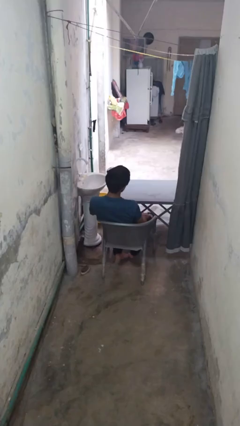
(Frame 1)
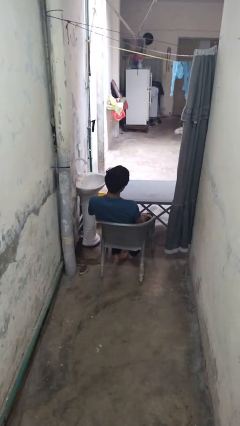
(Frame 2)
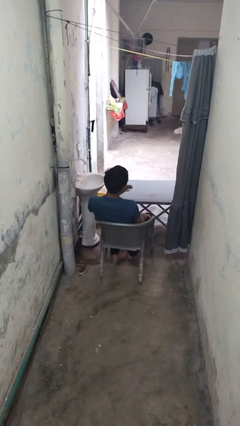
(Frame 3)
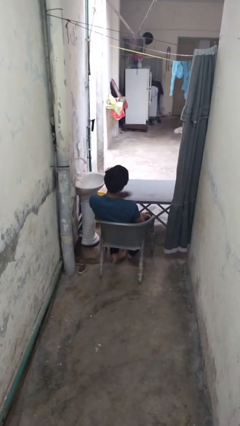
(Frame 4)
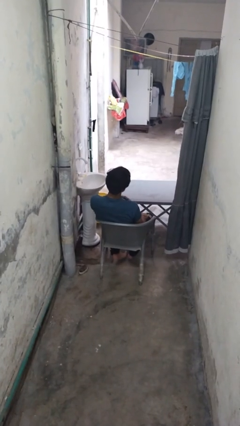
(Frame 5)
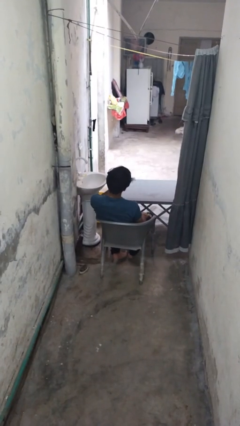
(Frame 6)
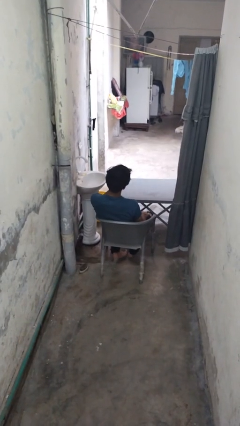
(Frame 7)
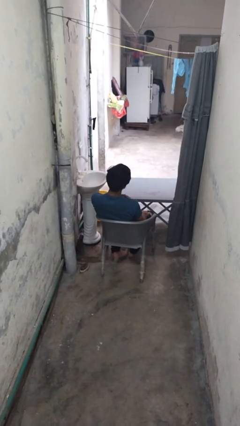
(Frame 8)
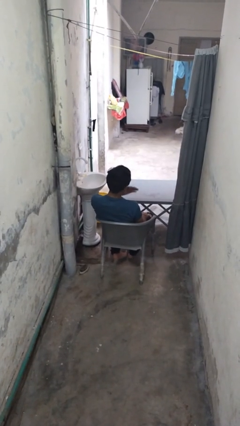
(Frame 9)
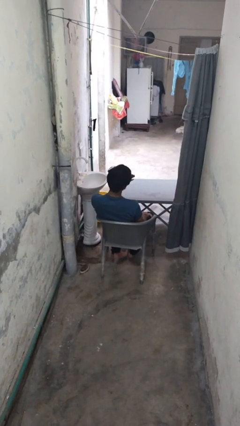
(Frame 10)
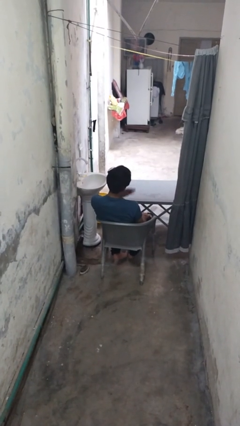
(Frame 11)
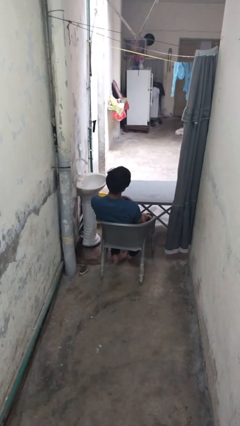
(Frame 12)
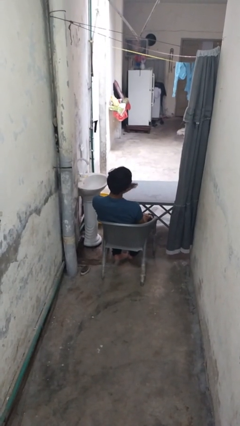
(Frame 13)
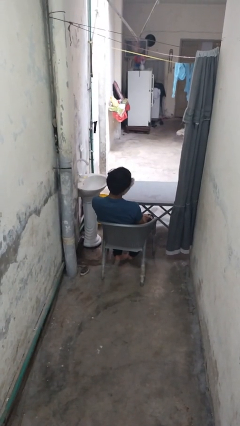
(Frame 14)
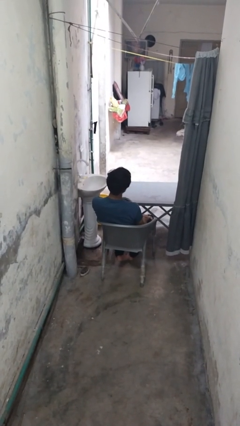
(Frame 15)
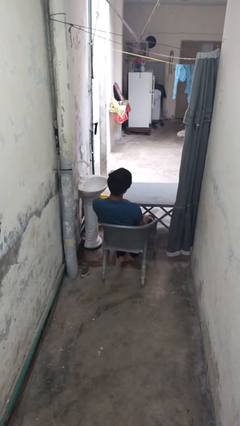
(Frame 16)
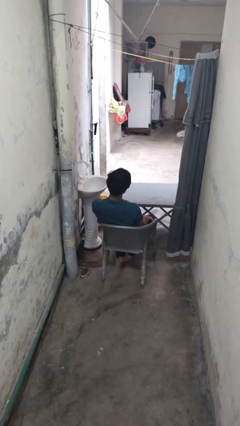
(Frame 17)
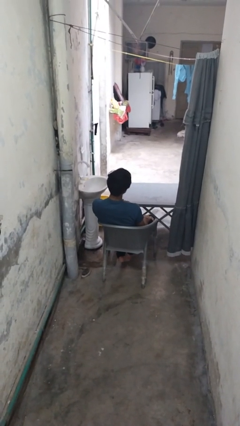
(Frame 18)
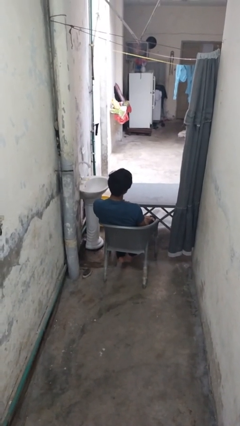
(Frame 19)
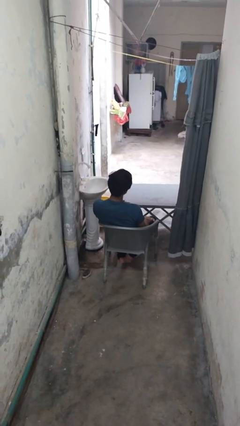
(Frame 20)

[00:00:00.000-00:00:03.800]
person drums on chest

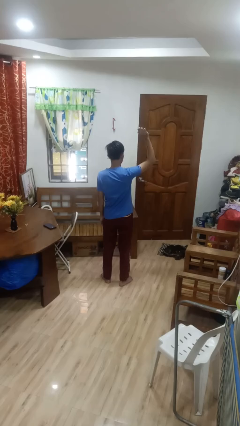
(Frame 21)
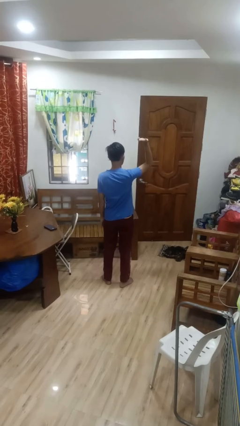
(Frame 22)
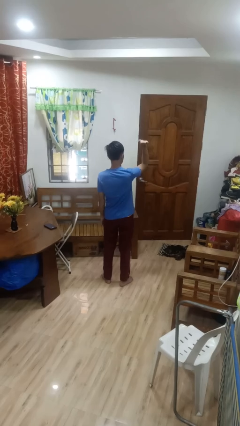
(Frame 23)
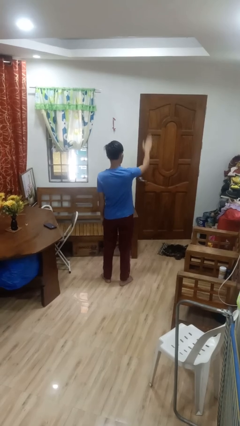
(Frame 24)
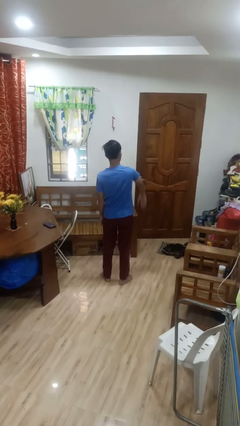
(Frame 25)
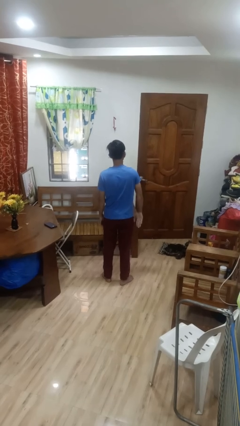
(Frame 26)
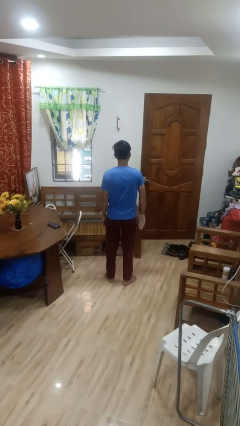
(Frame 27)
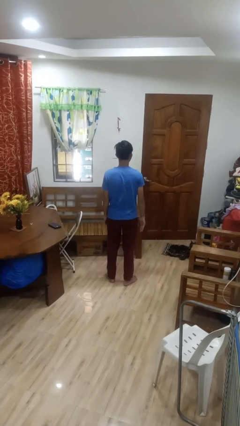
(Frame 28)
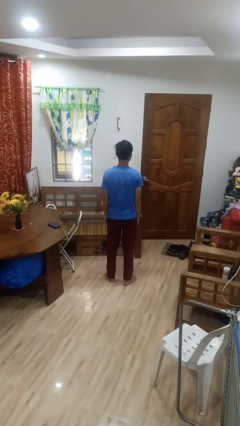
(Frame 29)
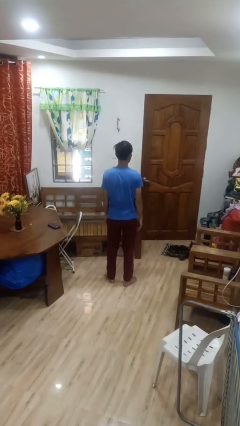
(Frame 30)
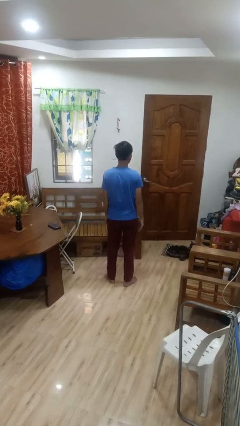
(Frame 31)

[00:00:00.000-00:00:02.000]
person gestures swipe down

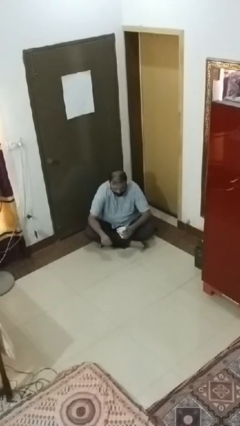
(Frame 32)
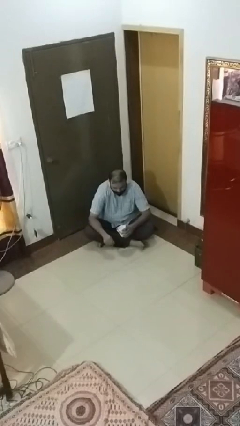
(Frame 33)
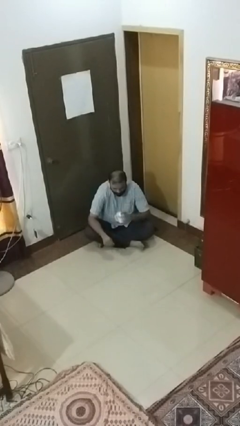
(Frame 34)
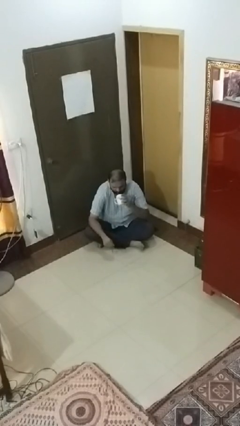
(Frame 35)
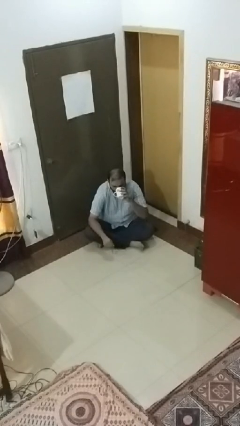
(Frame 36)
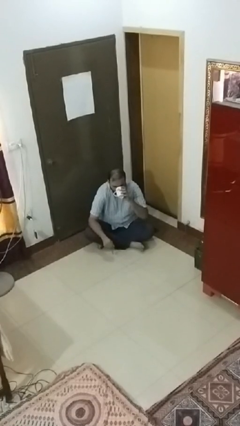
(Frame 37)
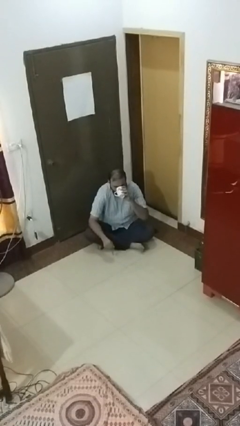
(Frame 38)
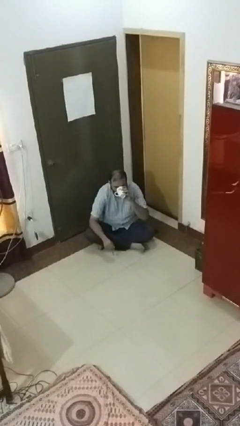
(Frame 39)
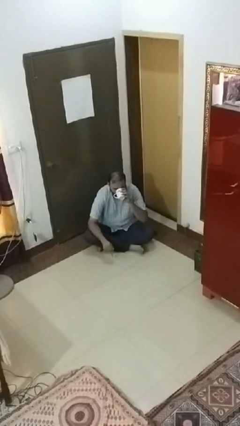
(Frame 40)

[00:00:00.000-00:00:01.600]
person drinks from mug

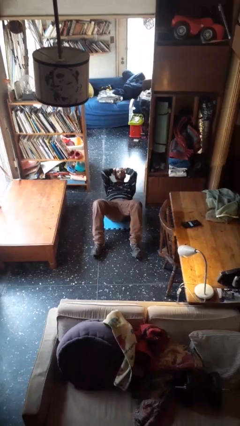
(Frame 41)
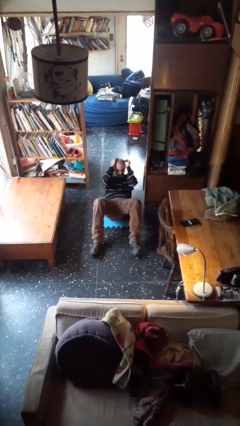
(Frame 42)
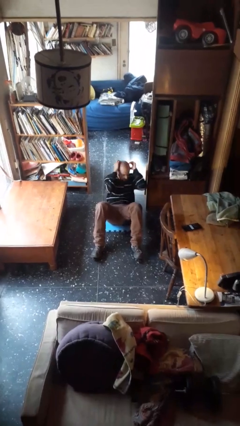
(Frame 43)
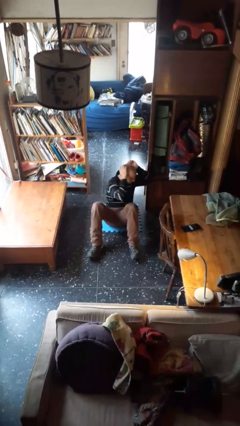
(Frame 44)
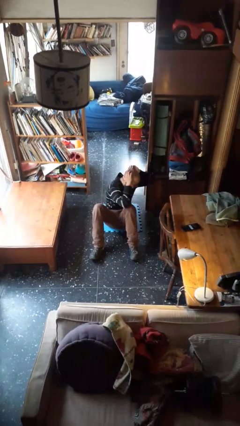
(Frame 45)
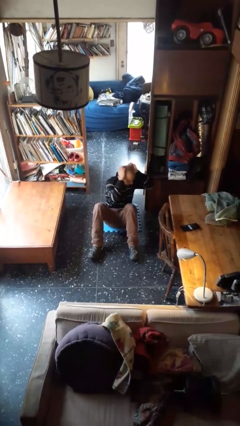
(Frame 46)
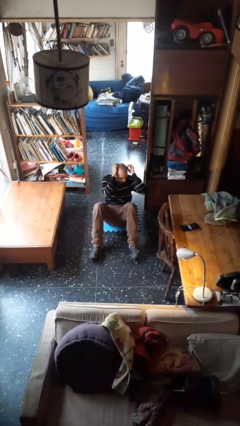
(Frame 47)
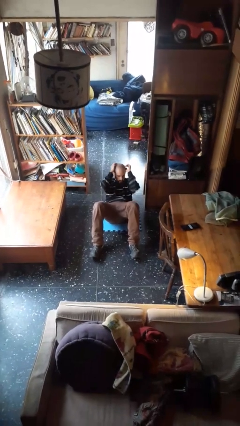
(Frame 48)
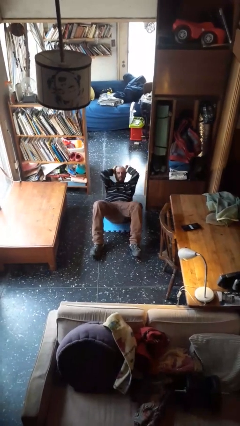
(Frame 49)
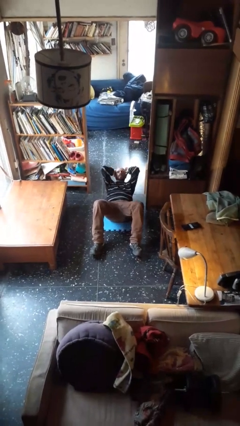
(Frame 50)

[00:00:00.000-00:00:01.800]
person exercises with situp

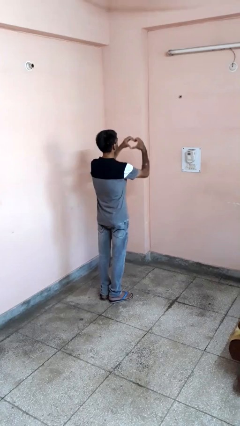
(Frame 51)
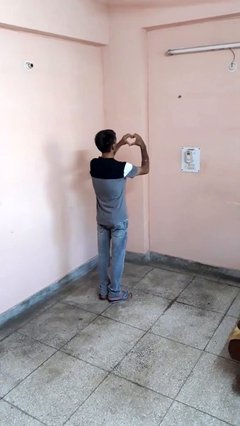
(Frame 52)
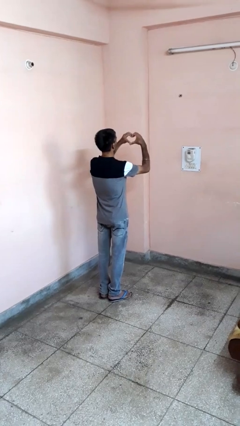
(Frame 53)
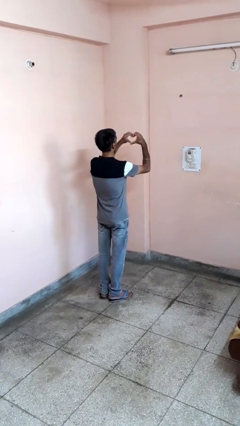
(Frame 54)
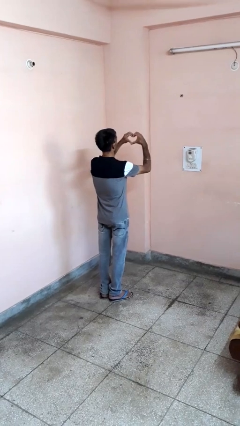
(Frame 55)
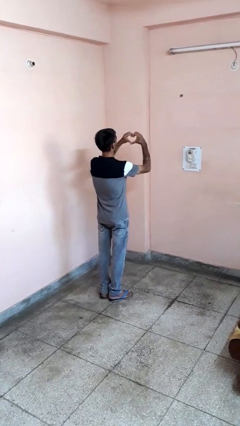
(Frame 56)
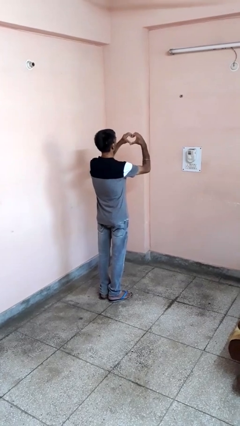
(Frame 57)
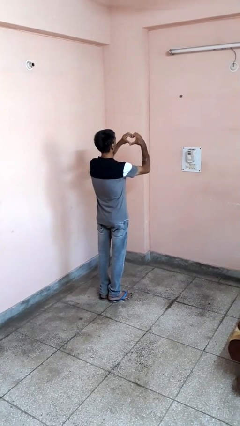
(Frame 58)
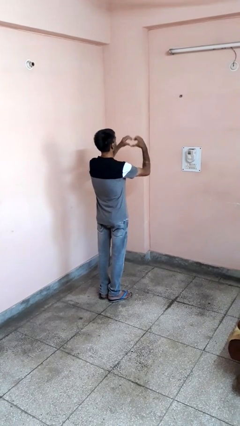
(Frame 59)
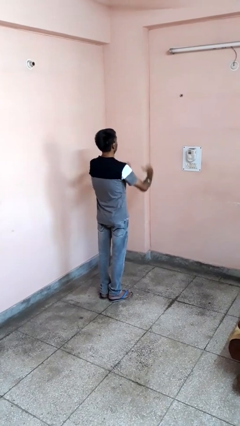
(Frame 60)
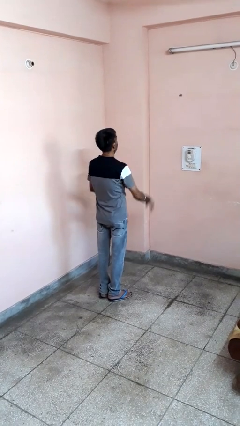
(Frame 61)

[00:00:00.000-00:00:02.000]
person gestures heart

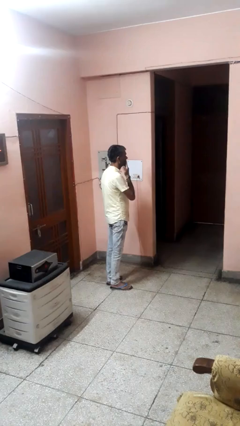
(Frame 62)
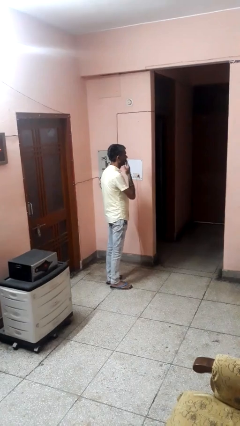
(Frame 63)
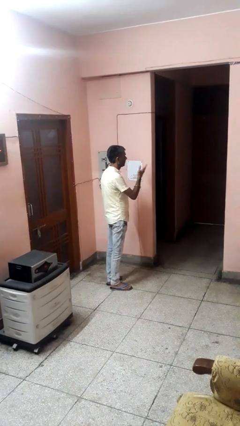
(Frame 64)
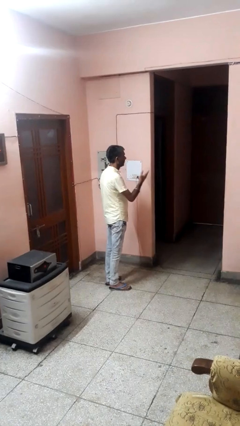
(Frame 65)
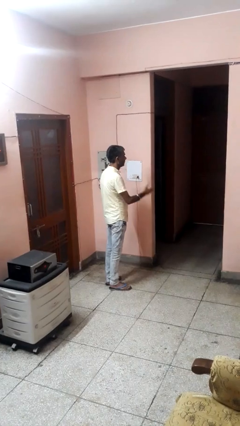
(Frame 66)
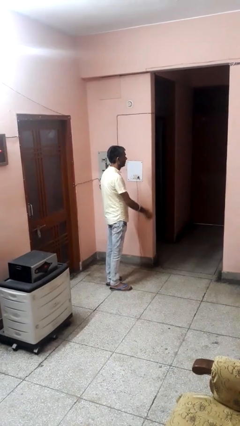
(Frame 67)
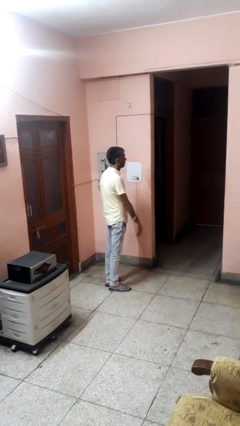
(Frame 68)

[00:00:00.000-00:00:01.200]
person gestures blow kiss

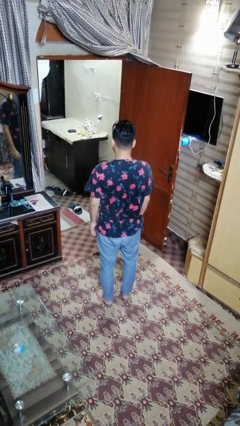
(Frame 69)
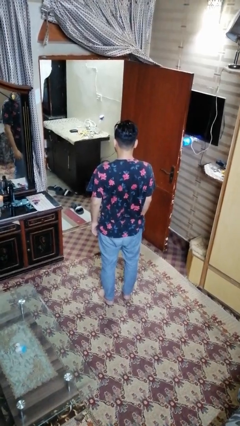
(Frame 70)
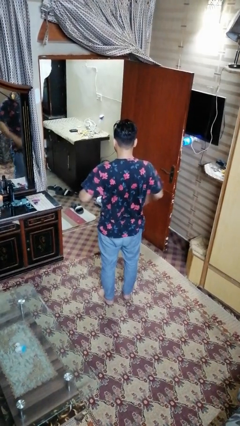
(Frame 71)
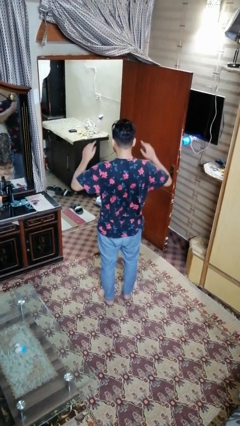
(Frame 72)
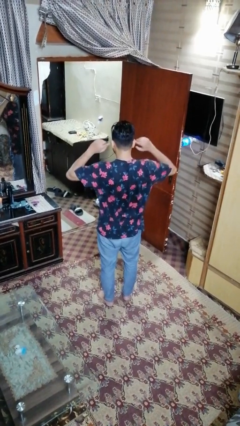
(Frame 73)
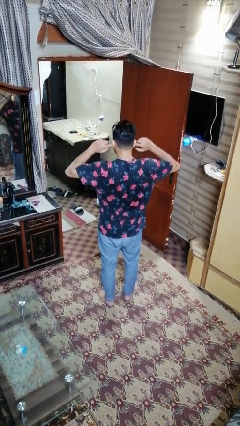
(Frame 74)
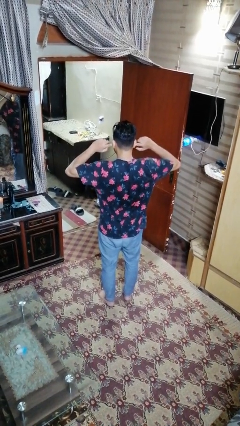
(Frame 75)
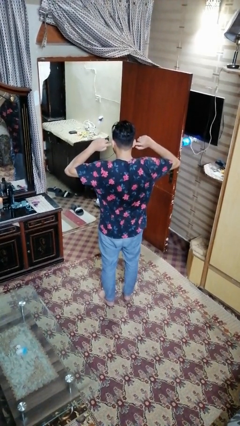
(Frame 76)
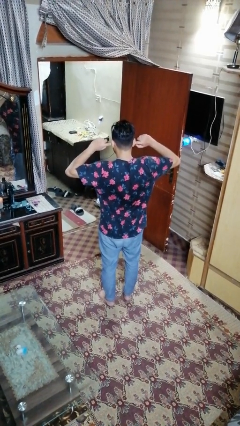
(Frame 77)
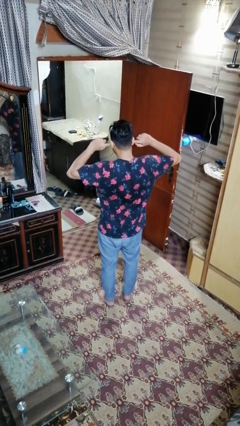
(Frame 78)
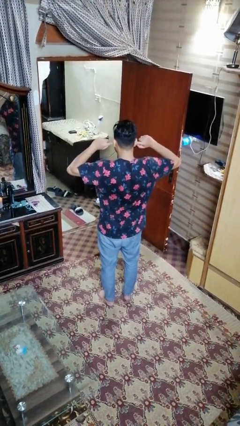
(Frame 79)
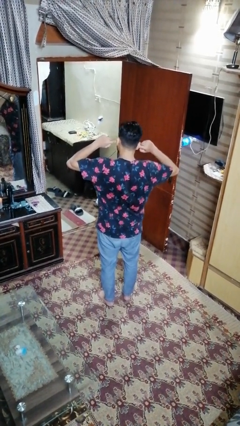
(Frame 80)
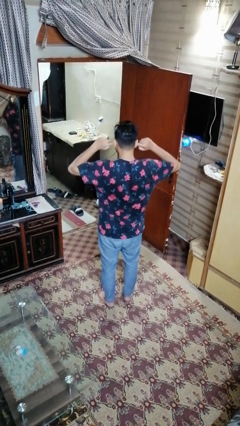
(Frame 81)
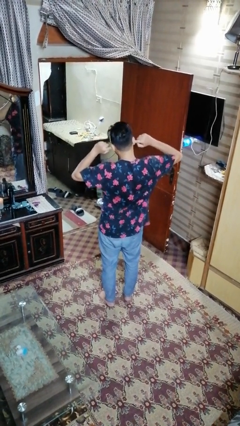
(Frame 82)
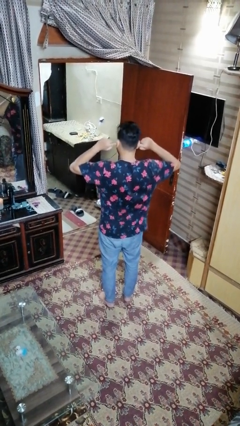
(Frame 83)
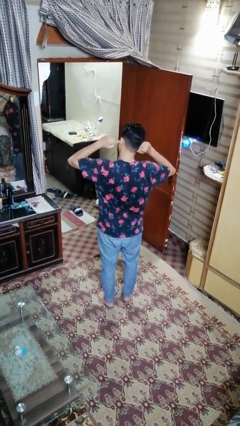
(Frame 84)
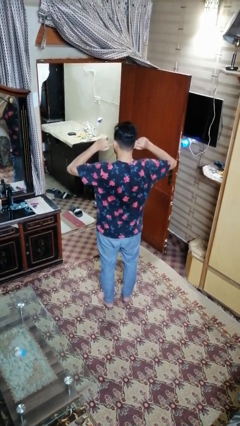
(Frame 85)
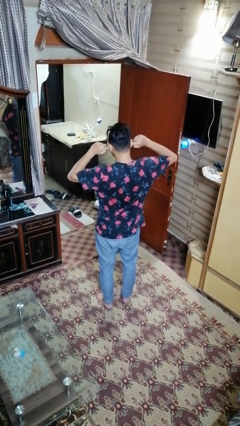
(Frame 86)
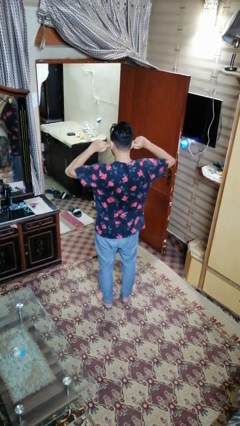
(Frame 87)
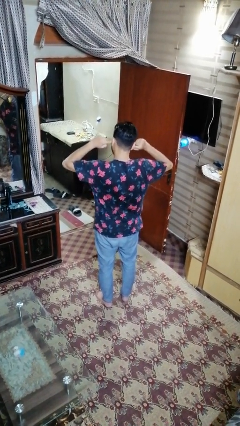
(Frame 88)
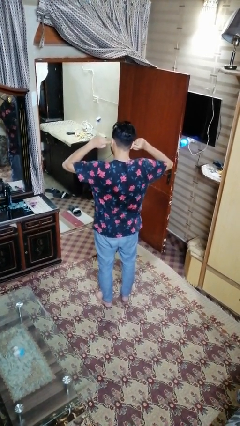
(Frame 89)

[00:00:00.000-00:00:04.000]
person puts fingers in ear

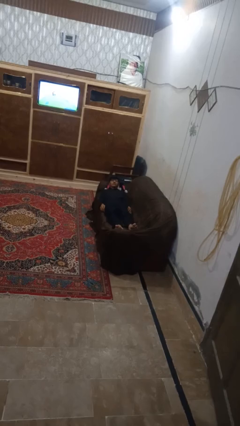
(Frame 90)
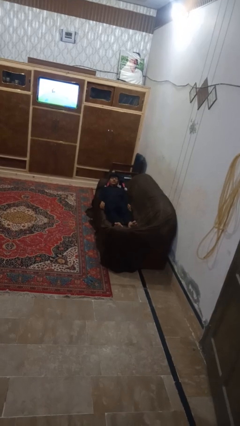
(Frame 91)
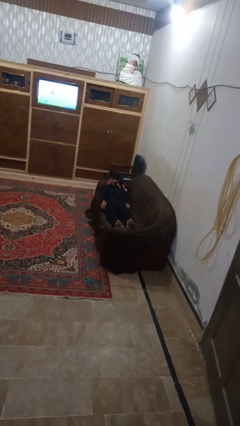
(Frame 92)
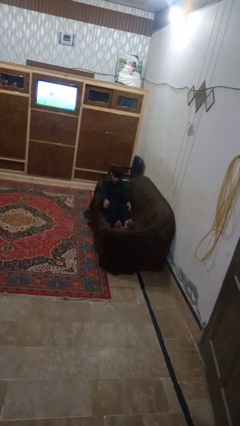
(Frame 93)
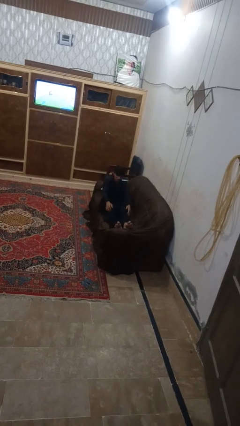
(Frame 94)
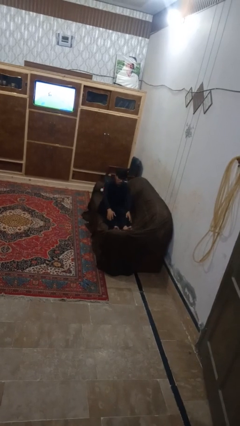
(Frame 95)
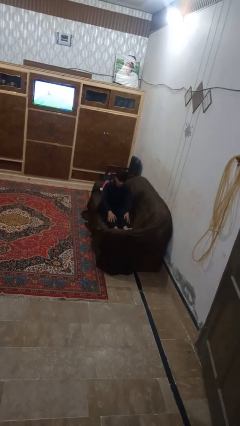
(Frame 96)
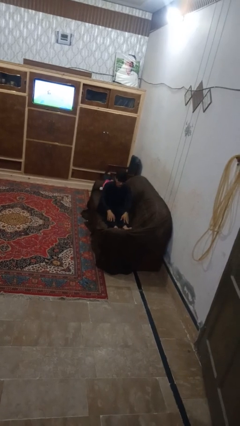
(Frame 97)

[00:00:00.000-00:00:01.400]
person stands up
